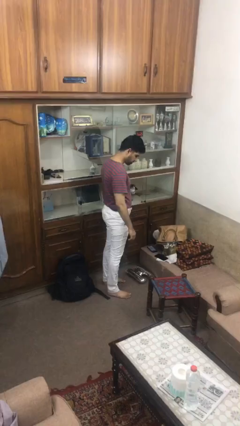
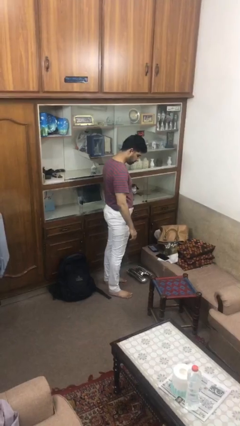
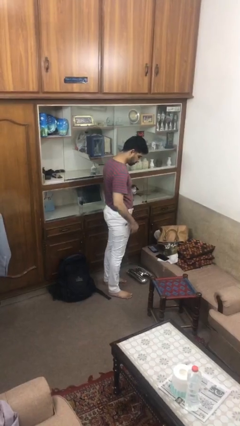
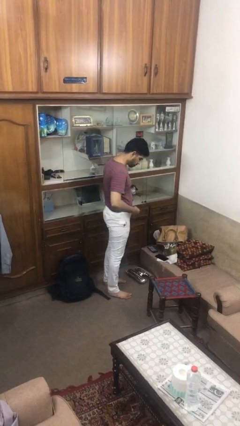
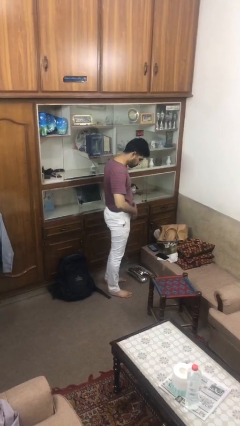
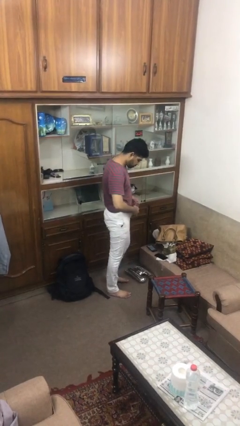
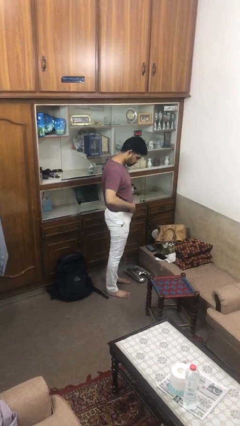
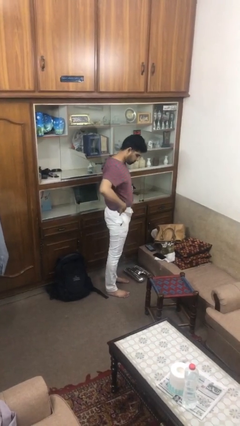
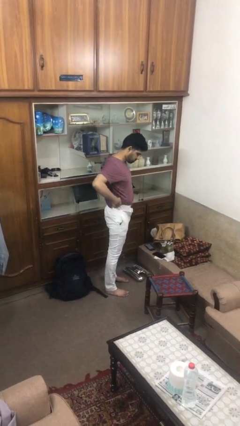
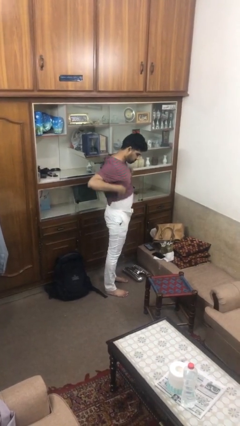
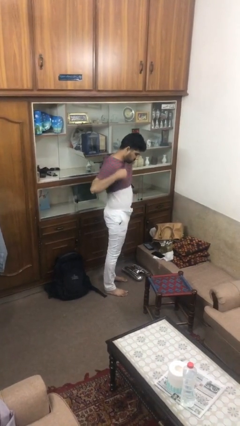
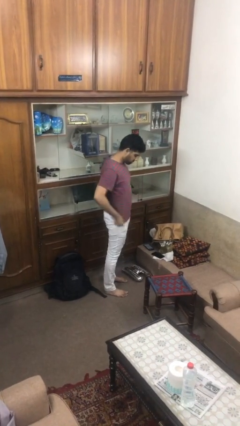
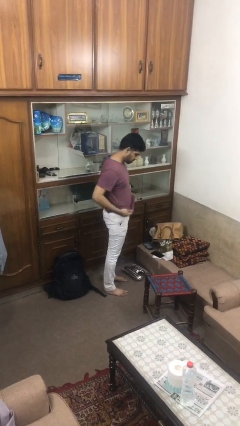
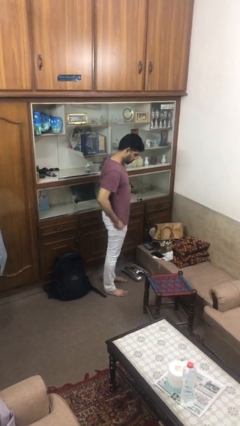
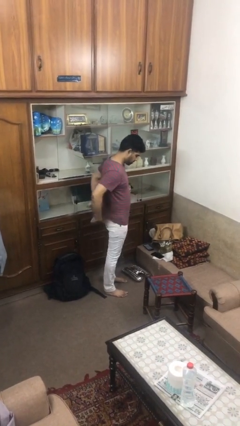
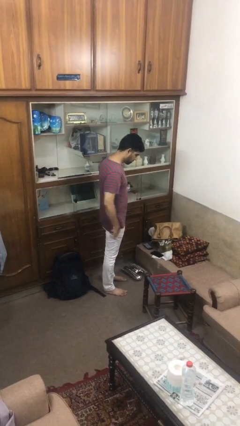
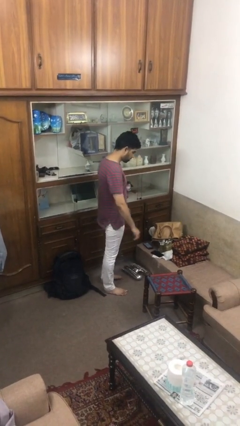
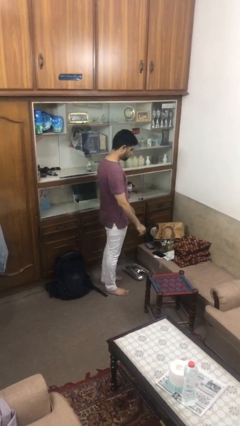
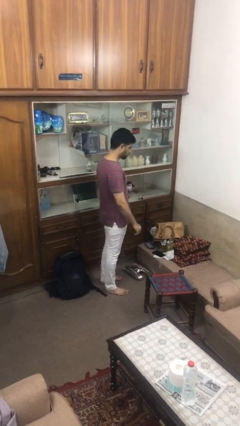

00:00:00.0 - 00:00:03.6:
person untucks shirt

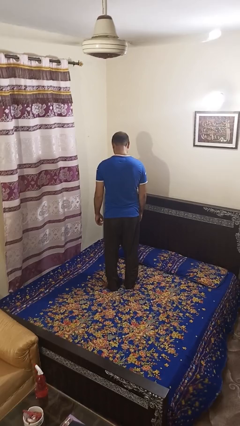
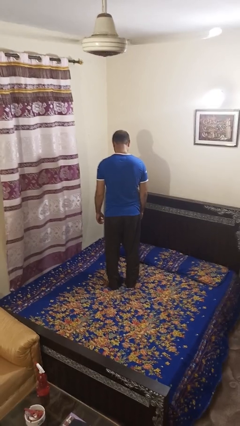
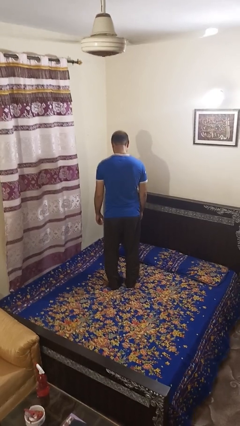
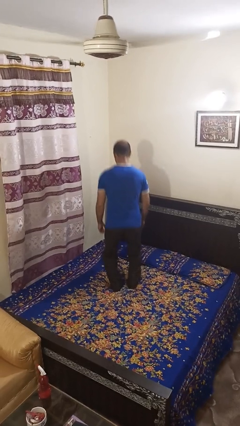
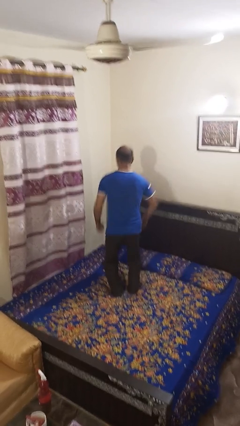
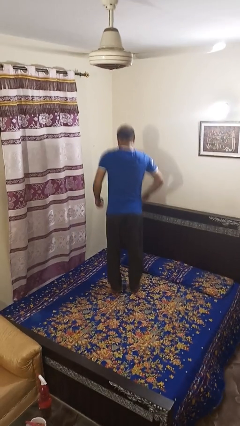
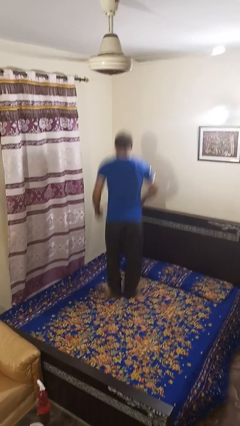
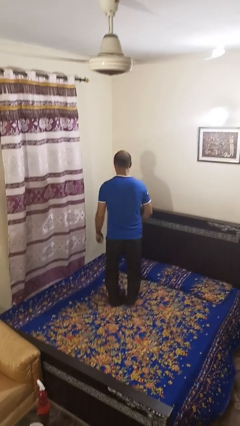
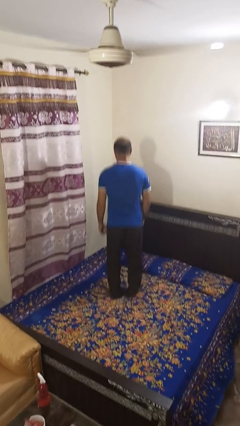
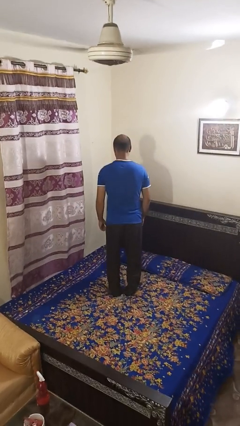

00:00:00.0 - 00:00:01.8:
person jumps on bed

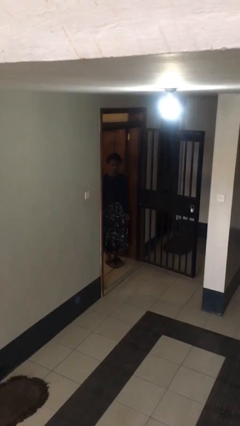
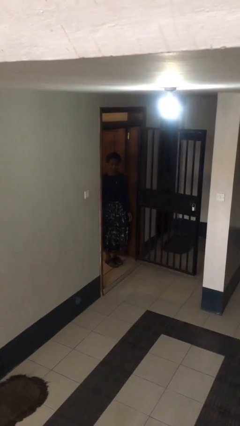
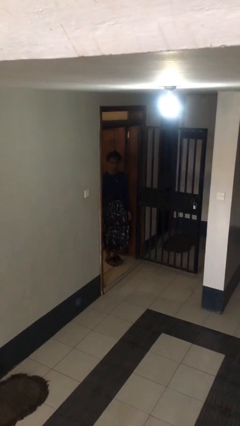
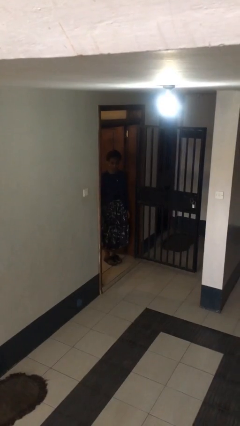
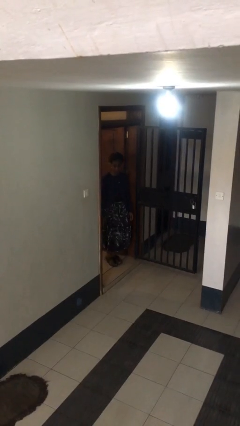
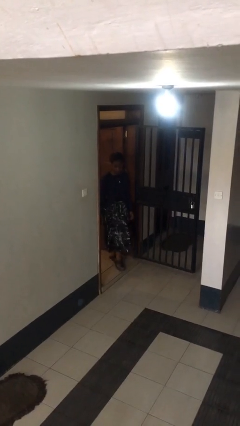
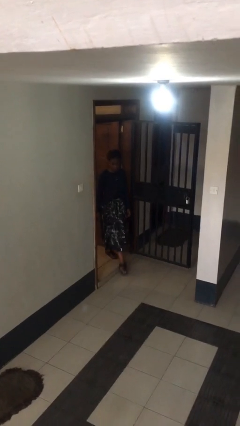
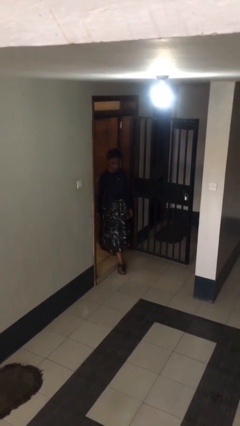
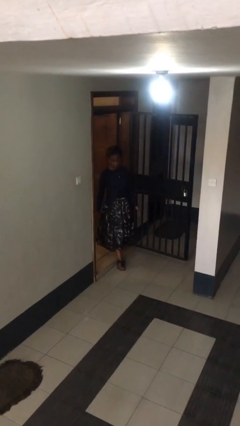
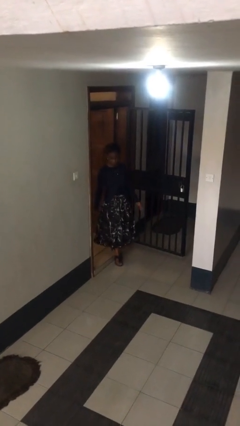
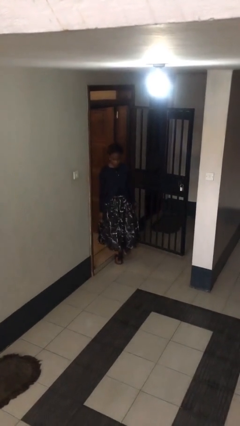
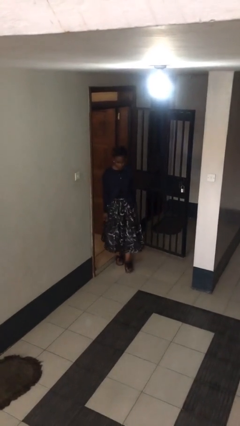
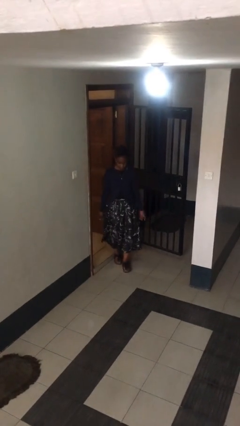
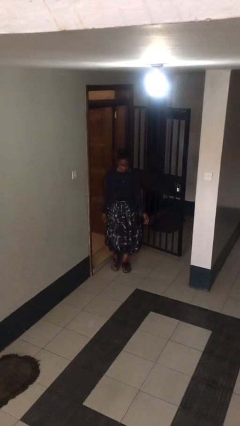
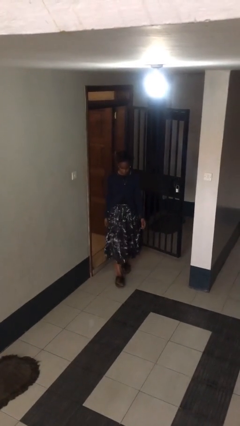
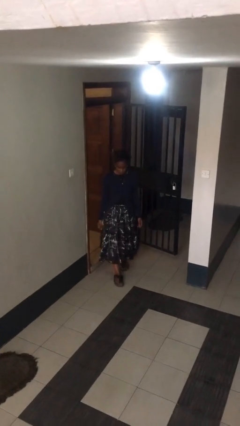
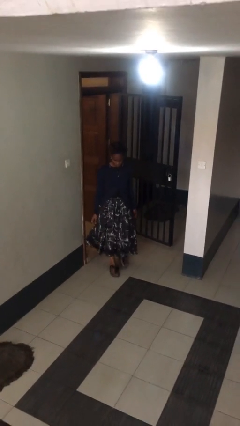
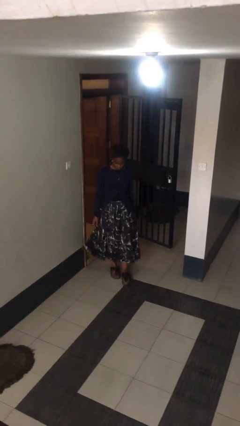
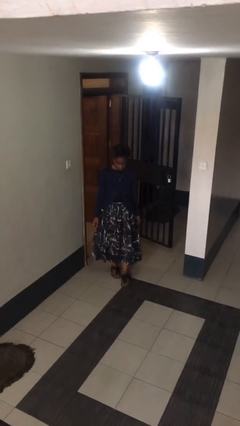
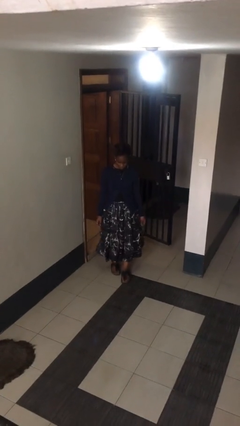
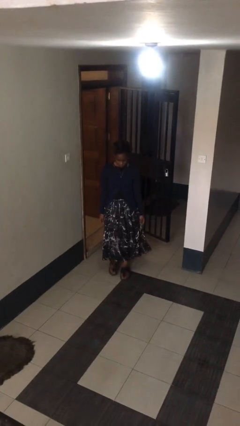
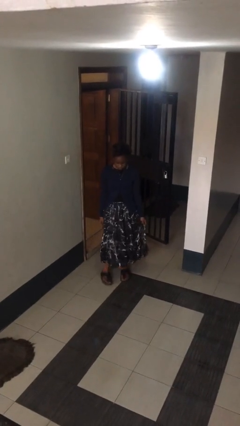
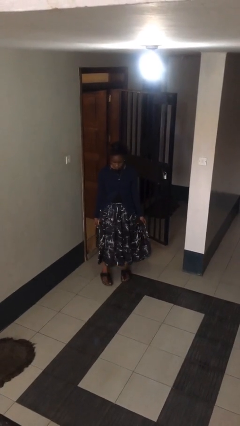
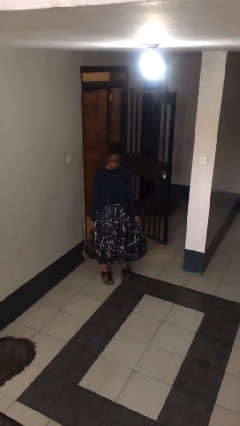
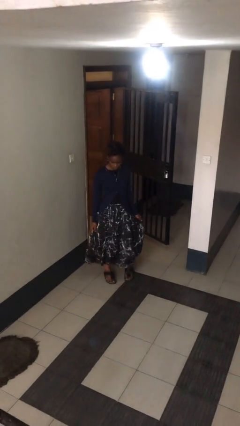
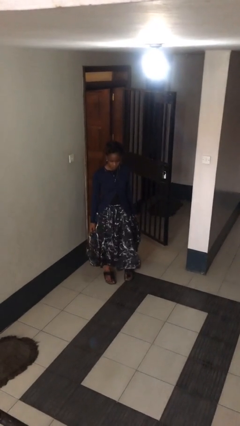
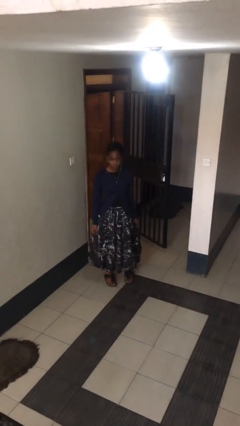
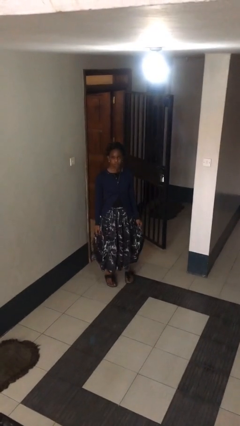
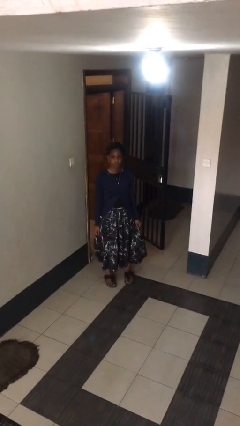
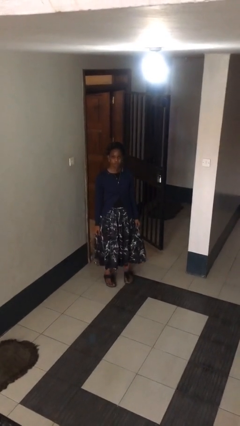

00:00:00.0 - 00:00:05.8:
person enters scene through structure

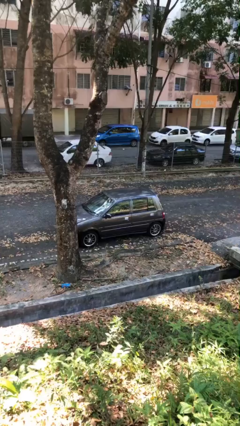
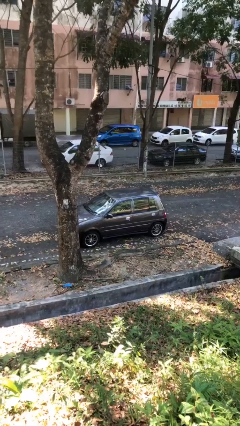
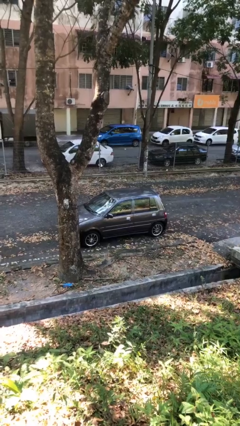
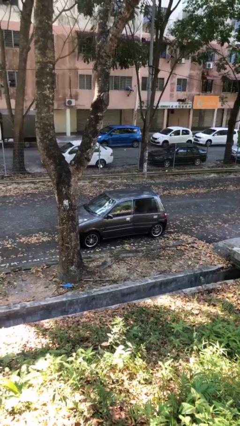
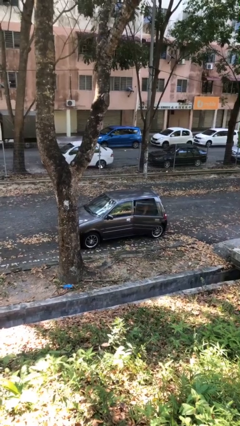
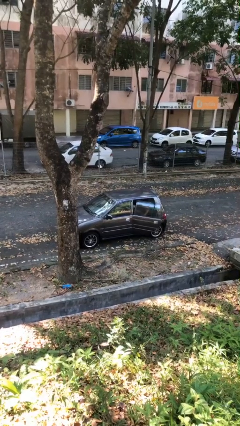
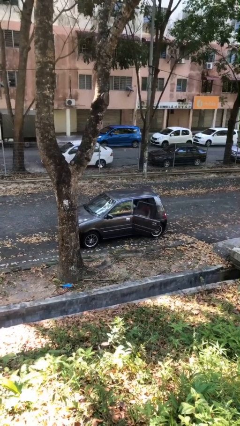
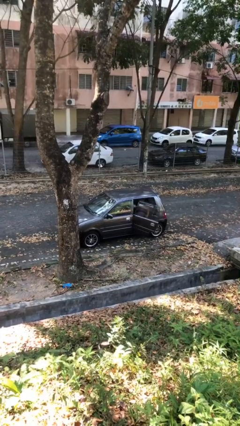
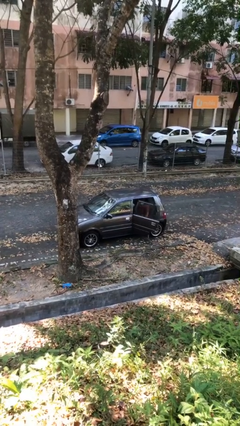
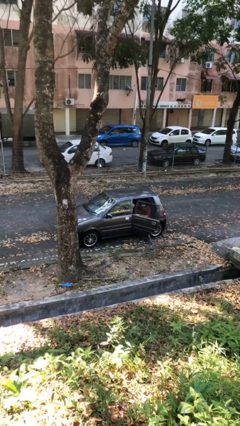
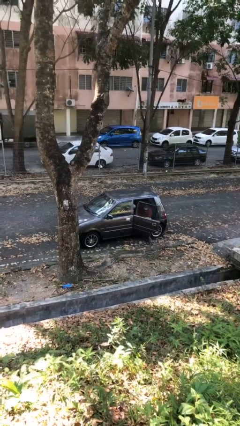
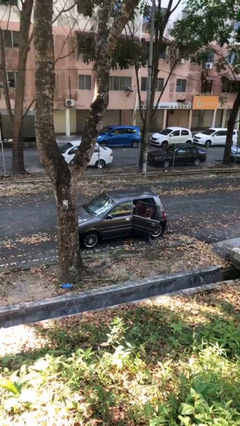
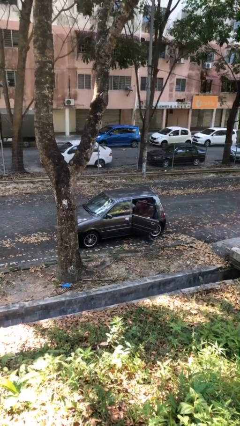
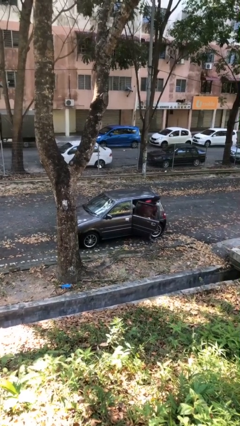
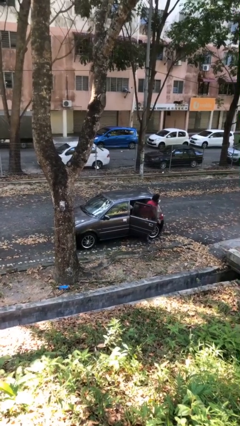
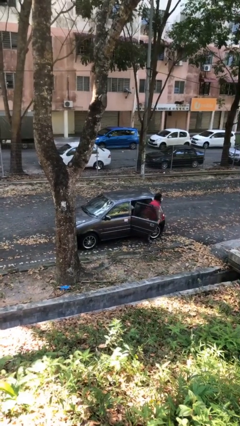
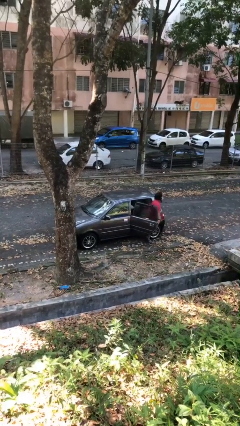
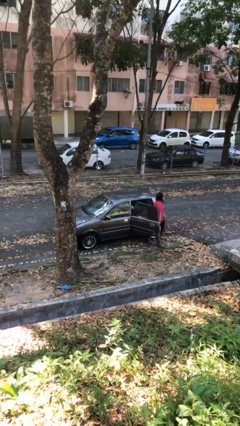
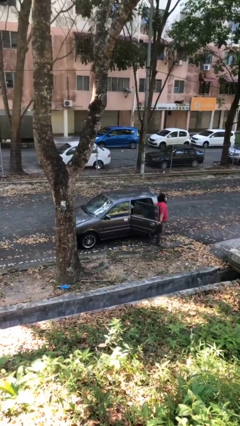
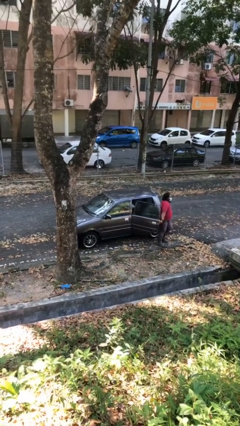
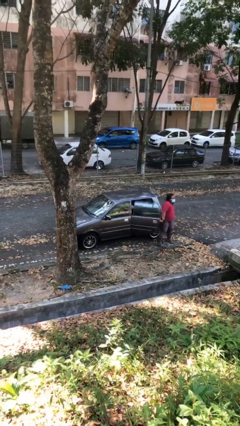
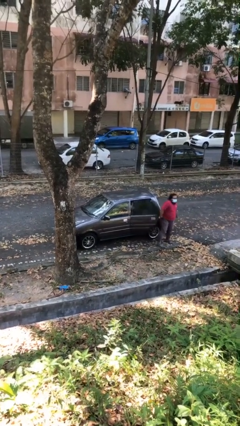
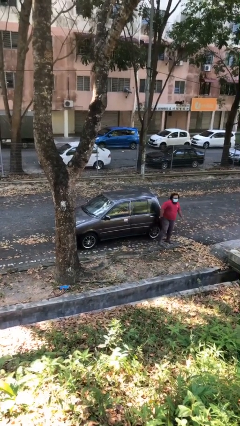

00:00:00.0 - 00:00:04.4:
car drops off person

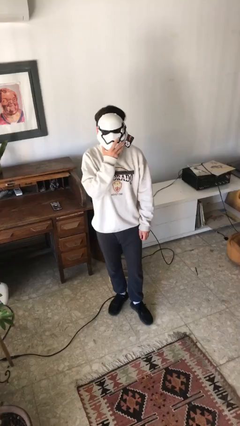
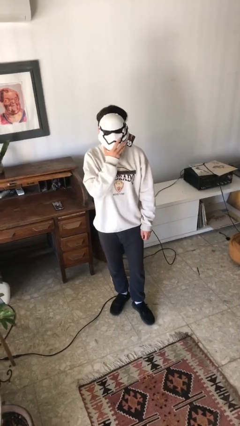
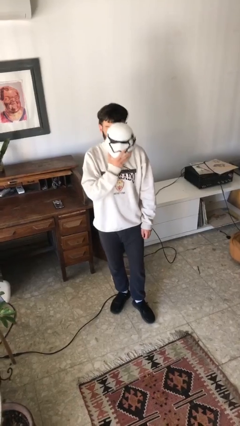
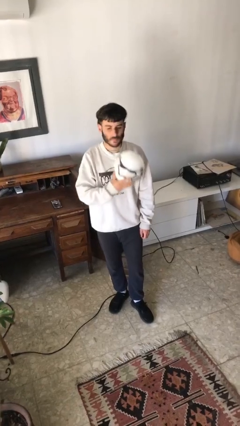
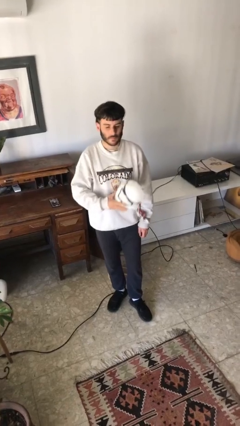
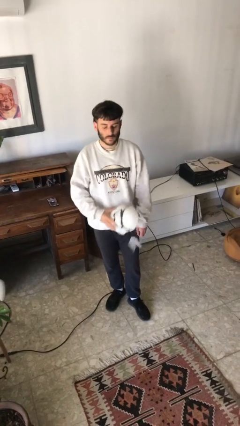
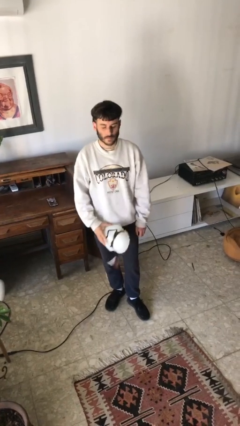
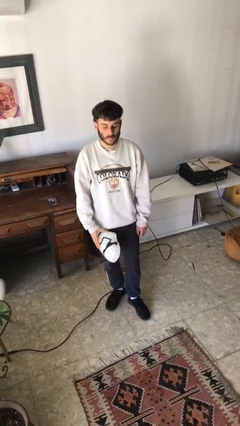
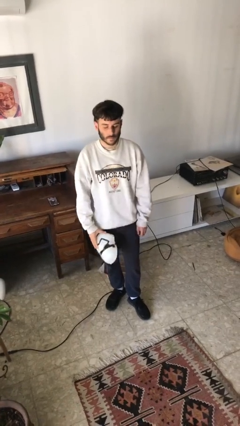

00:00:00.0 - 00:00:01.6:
person takes off facemask

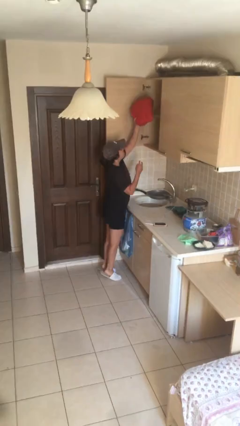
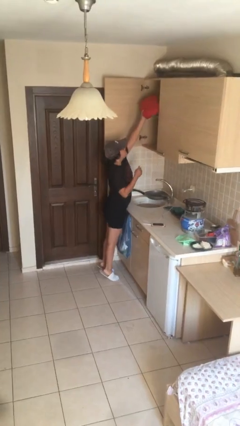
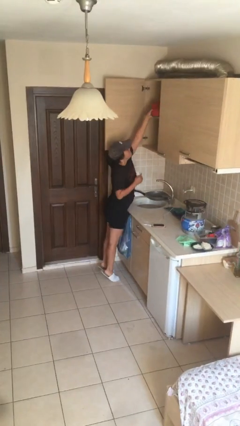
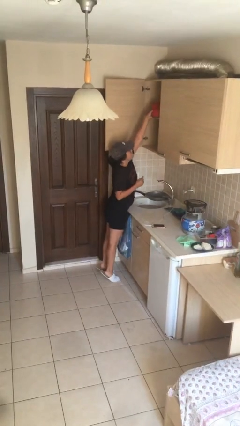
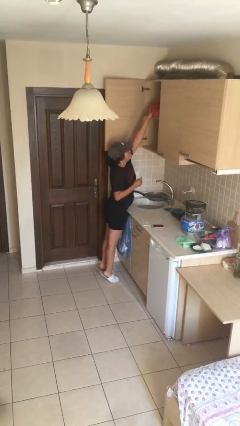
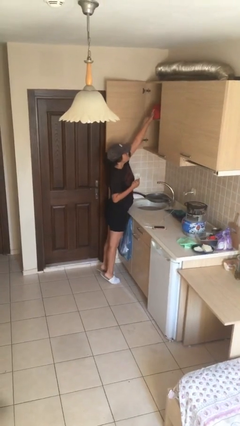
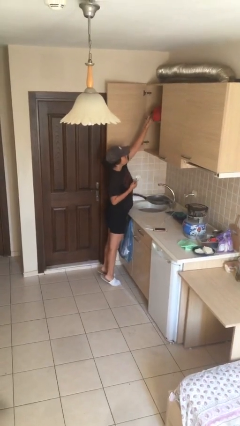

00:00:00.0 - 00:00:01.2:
person puts down object on shelf
